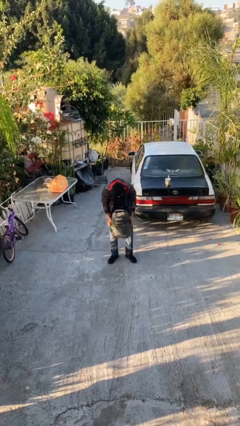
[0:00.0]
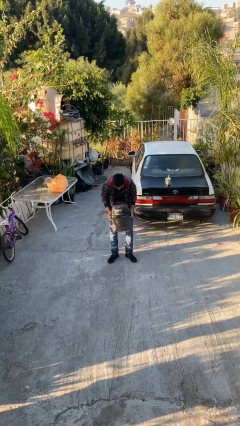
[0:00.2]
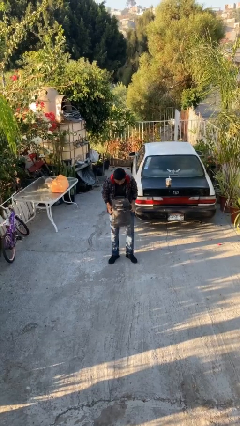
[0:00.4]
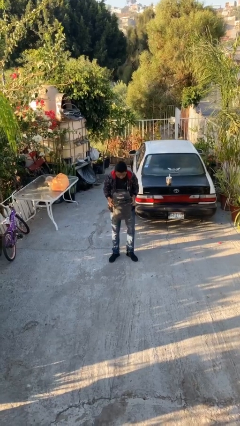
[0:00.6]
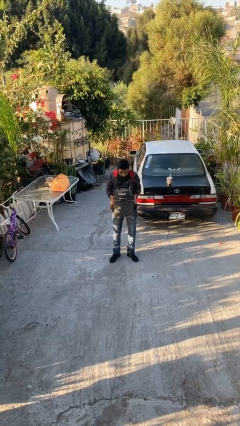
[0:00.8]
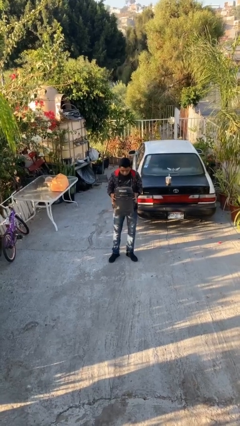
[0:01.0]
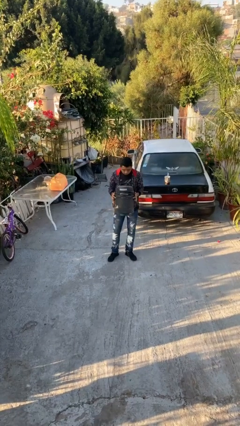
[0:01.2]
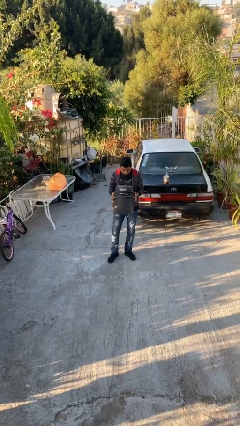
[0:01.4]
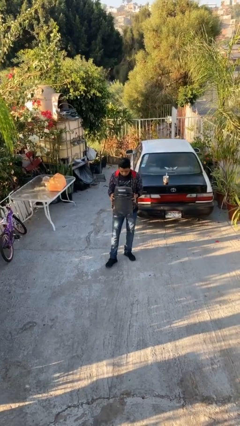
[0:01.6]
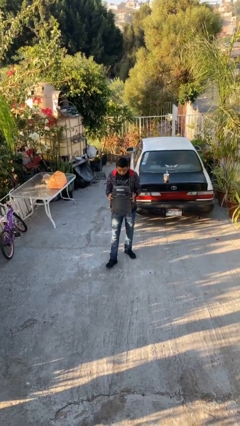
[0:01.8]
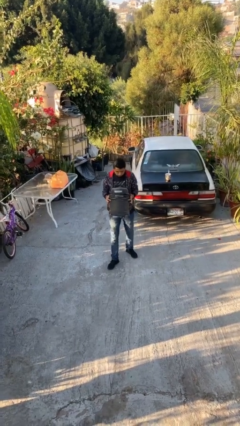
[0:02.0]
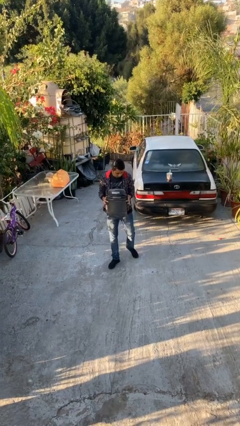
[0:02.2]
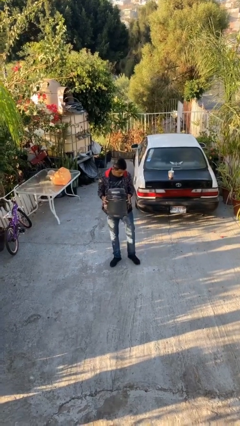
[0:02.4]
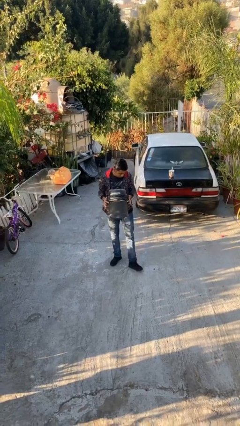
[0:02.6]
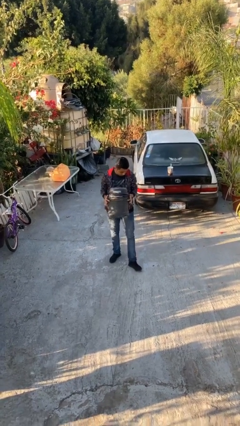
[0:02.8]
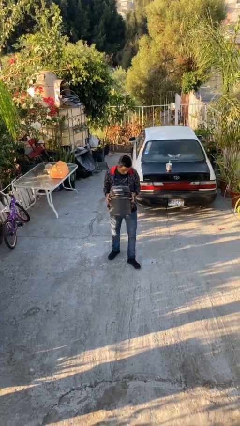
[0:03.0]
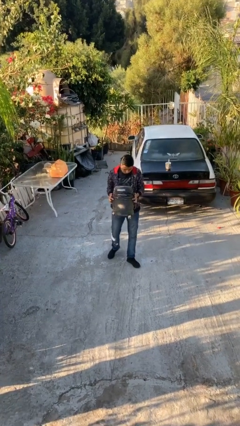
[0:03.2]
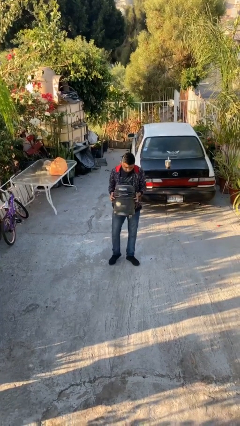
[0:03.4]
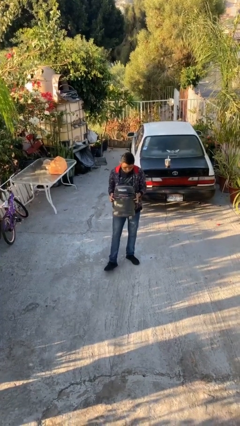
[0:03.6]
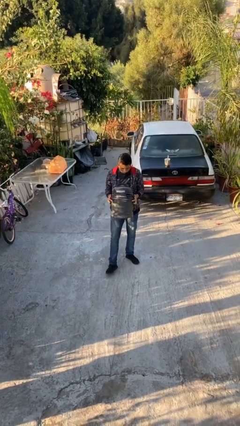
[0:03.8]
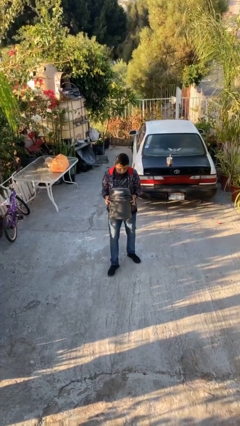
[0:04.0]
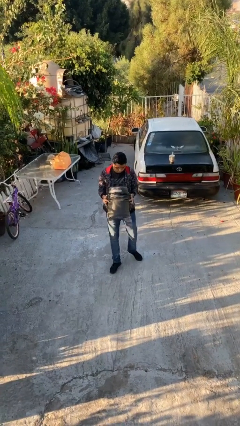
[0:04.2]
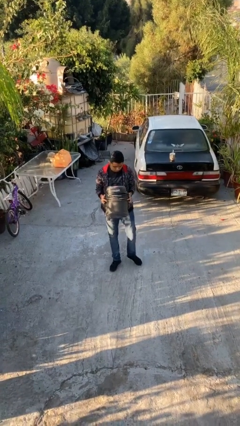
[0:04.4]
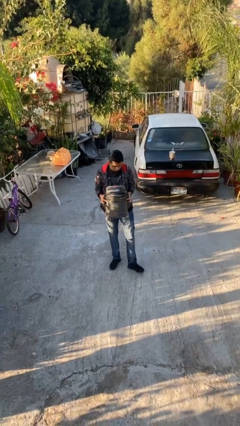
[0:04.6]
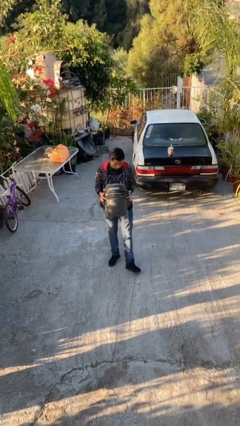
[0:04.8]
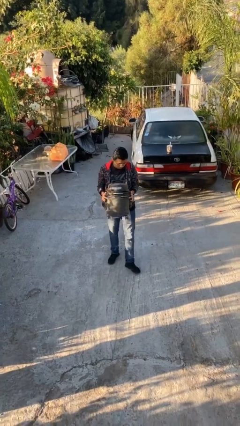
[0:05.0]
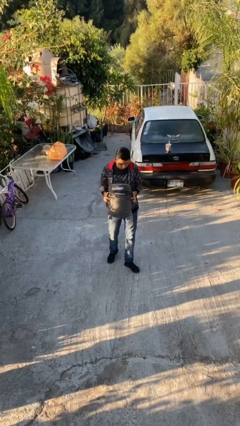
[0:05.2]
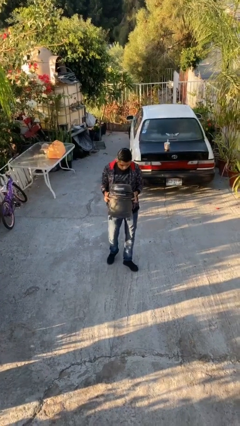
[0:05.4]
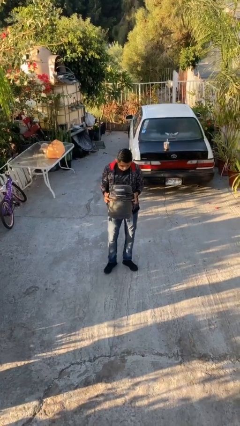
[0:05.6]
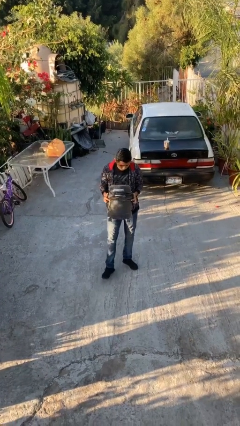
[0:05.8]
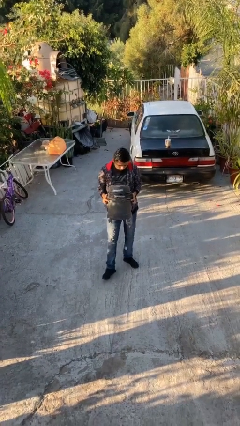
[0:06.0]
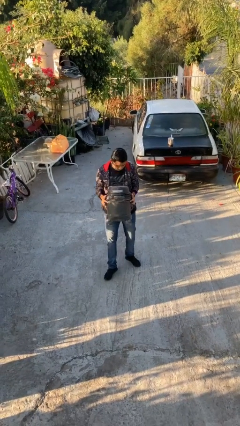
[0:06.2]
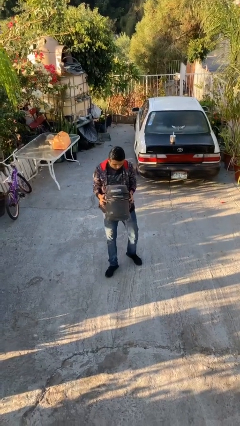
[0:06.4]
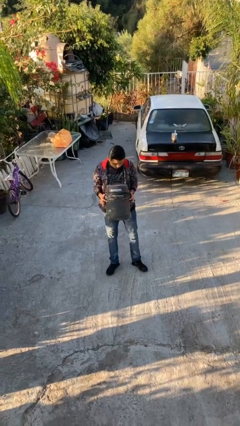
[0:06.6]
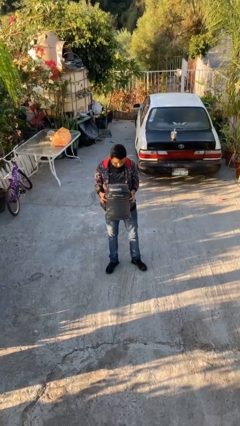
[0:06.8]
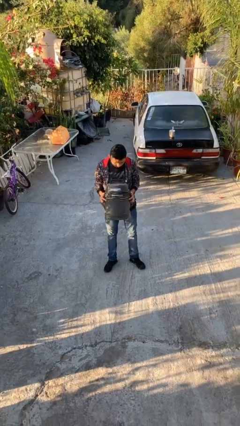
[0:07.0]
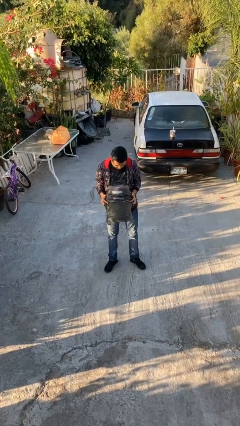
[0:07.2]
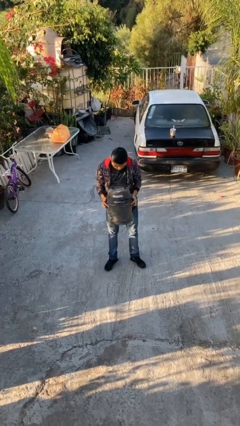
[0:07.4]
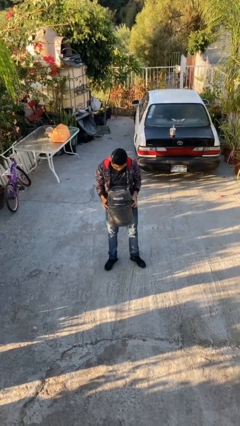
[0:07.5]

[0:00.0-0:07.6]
person carries heavy object

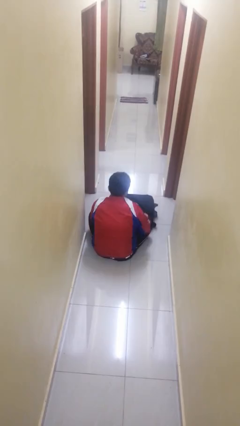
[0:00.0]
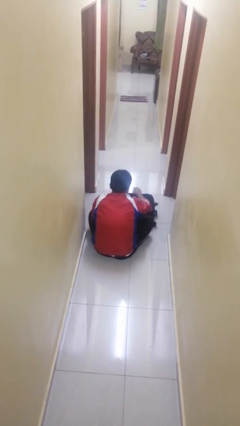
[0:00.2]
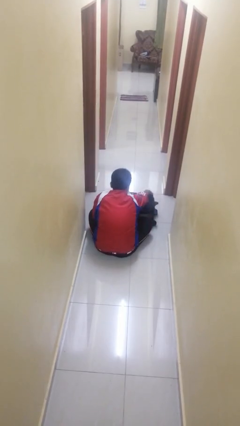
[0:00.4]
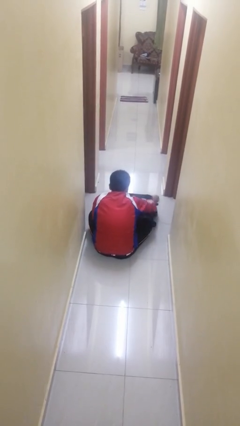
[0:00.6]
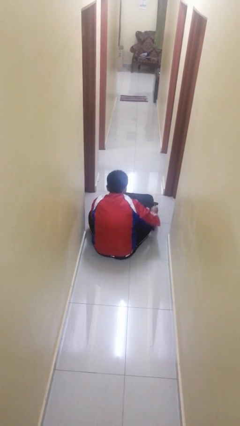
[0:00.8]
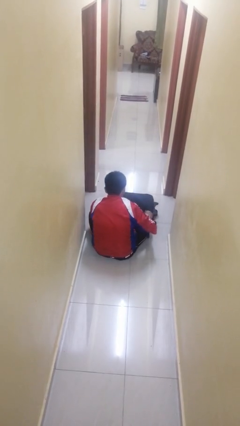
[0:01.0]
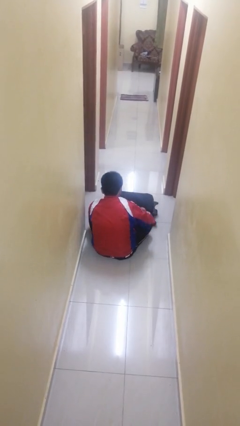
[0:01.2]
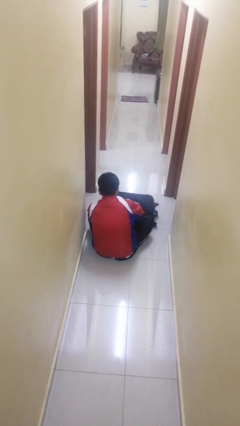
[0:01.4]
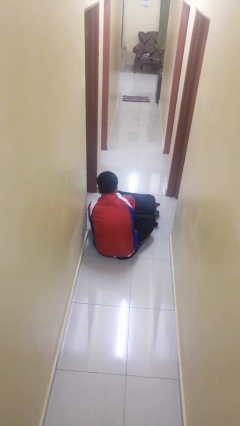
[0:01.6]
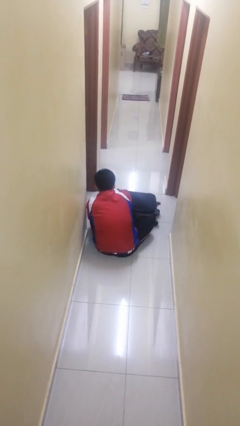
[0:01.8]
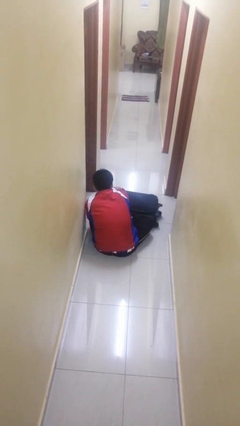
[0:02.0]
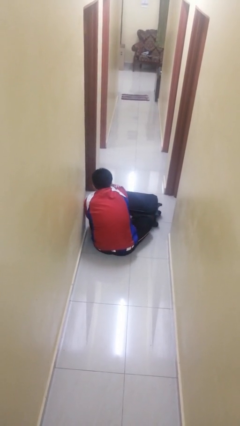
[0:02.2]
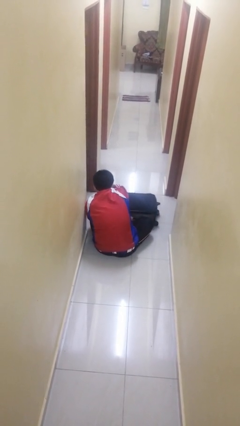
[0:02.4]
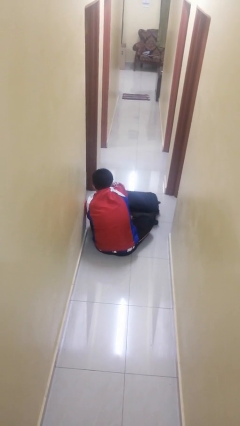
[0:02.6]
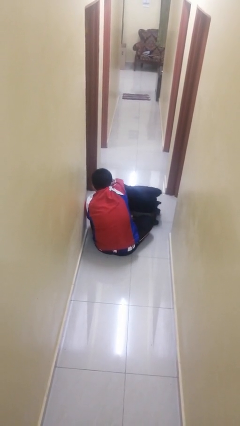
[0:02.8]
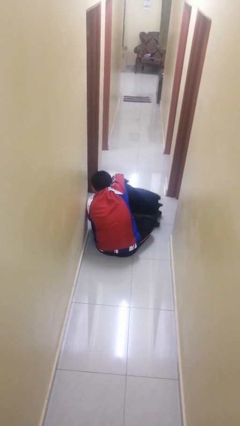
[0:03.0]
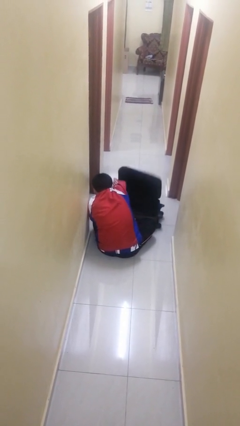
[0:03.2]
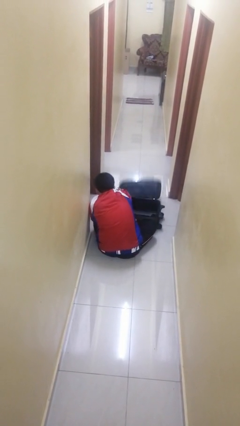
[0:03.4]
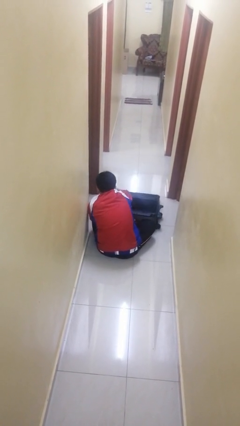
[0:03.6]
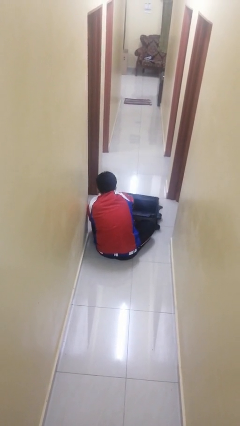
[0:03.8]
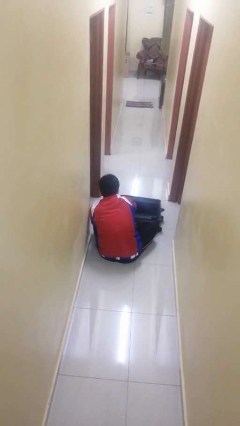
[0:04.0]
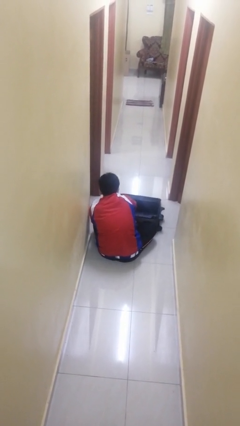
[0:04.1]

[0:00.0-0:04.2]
person opens suitcase

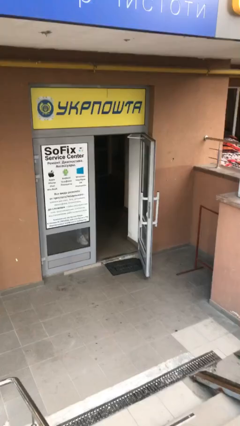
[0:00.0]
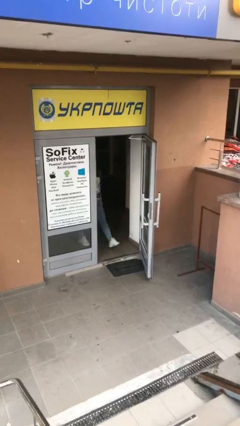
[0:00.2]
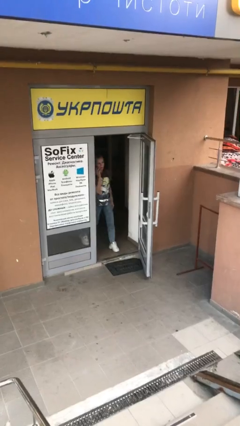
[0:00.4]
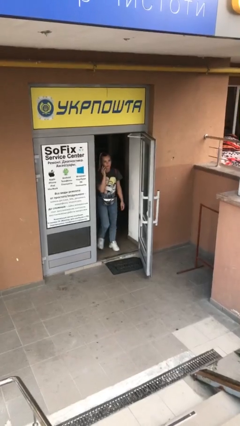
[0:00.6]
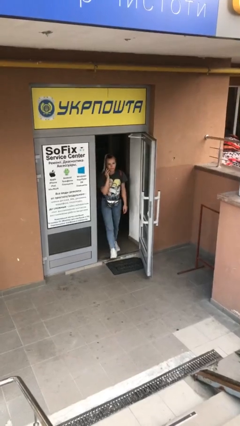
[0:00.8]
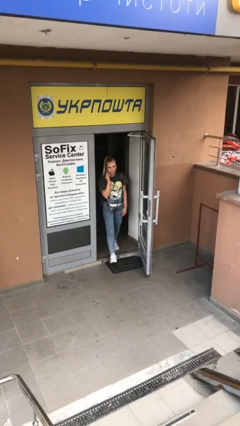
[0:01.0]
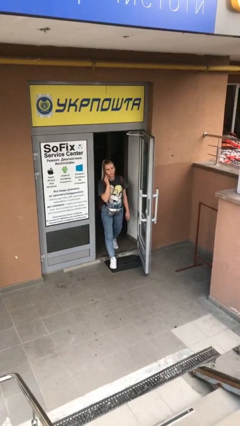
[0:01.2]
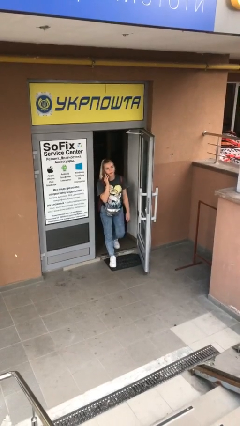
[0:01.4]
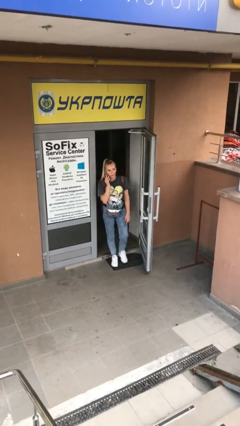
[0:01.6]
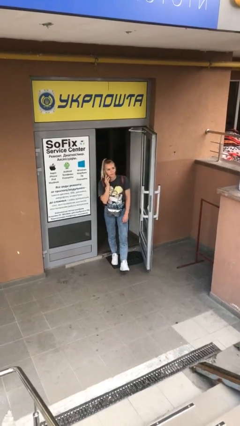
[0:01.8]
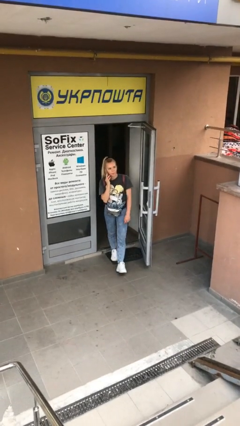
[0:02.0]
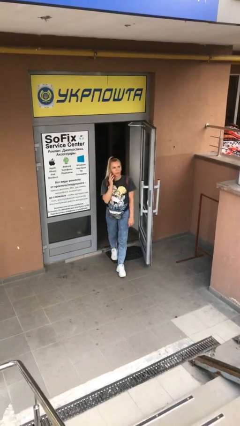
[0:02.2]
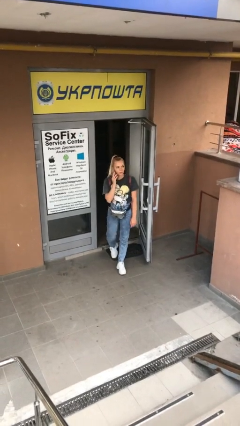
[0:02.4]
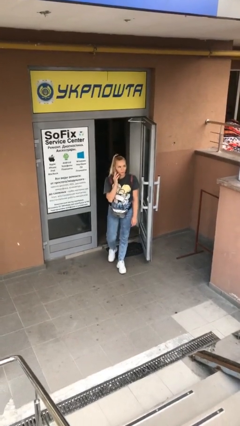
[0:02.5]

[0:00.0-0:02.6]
person enters scene through structure

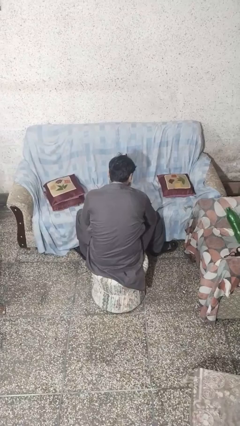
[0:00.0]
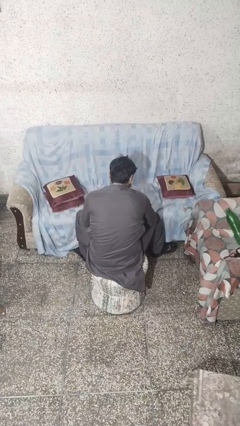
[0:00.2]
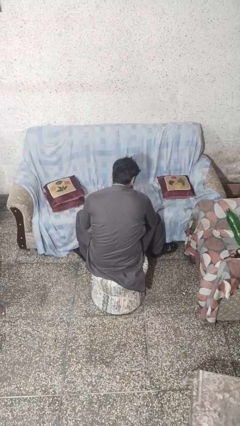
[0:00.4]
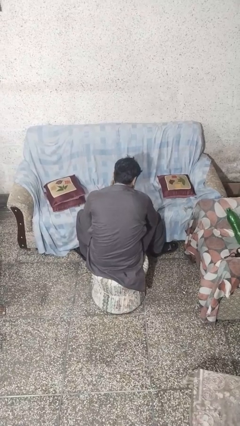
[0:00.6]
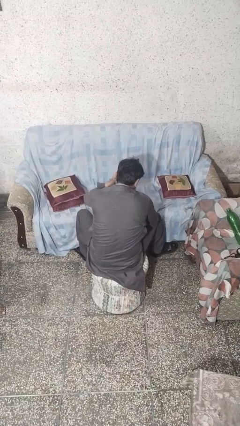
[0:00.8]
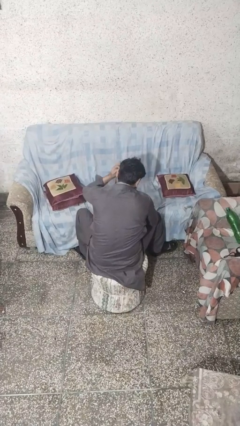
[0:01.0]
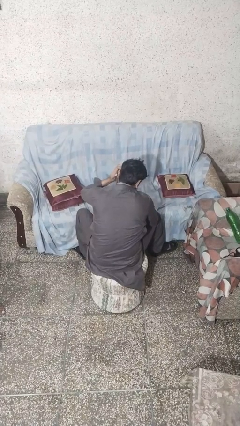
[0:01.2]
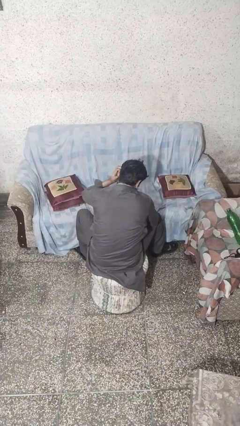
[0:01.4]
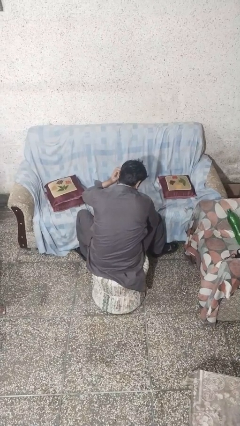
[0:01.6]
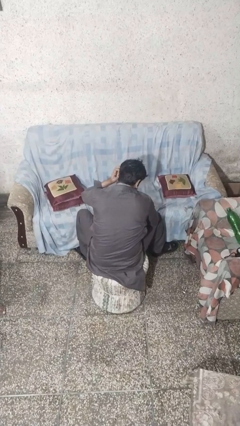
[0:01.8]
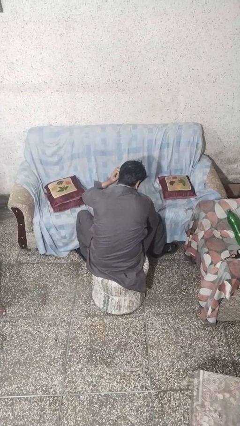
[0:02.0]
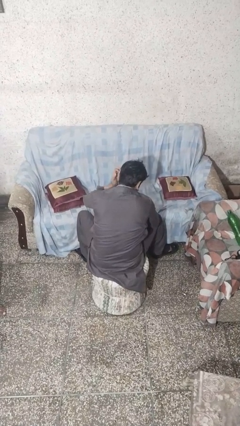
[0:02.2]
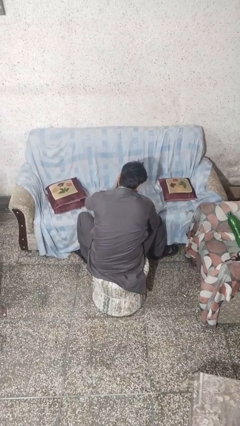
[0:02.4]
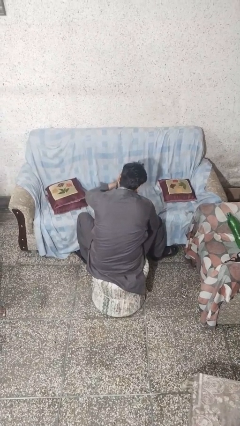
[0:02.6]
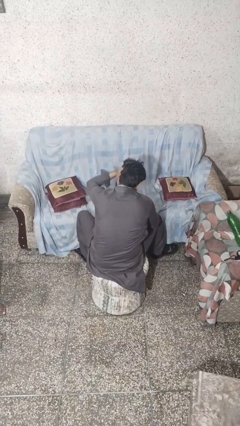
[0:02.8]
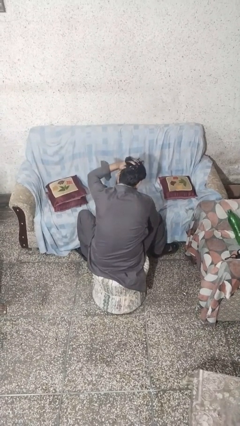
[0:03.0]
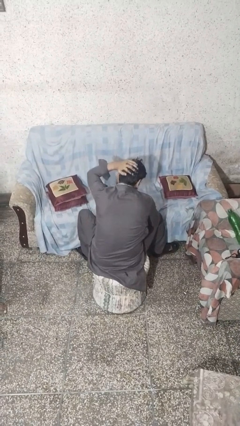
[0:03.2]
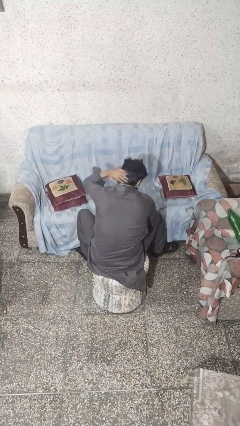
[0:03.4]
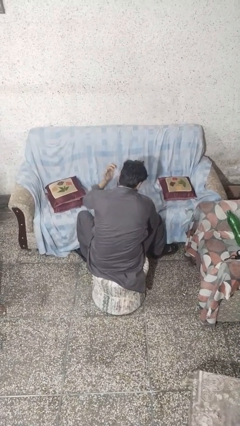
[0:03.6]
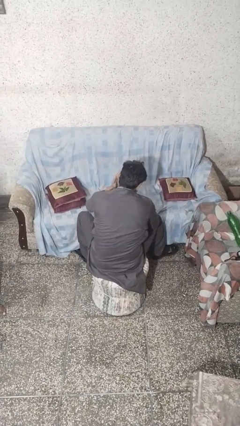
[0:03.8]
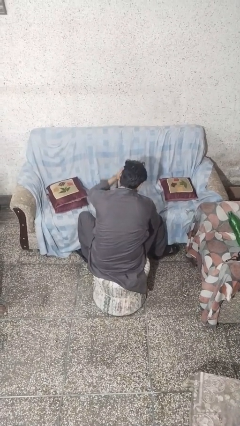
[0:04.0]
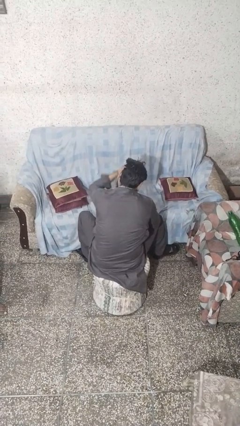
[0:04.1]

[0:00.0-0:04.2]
person strokes hair
